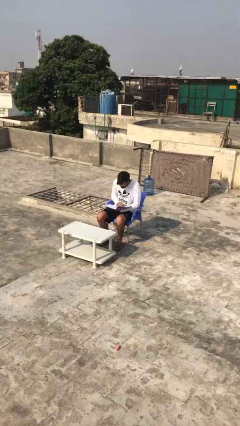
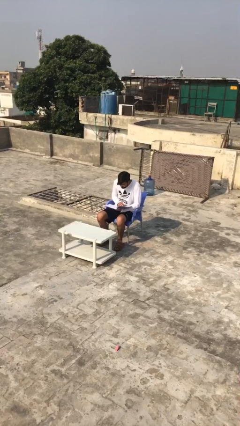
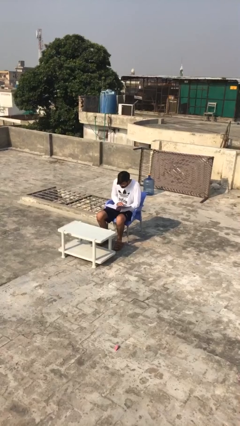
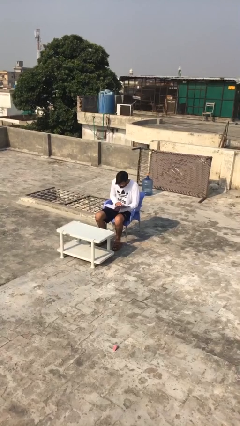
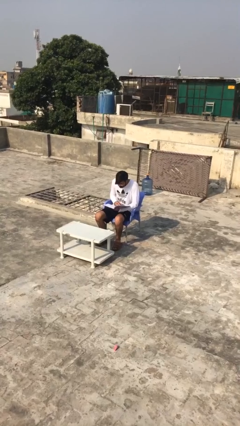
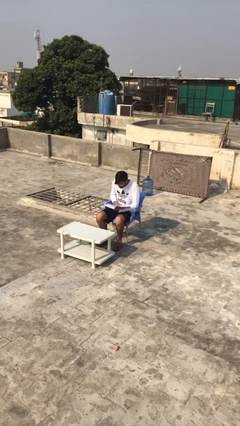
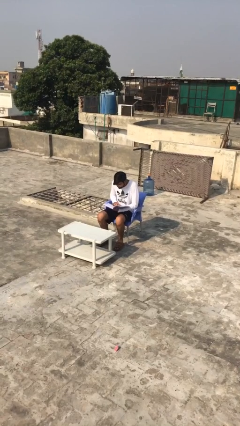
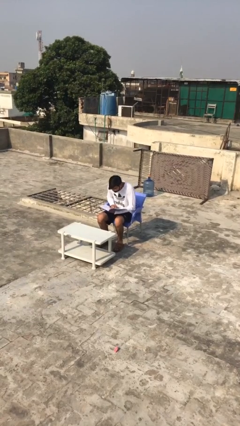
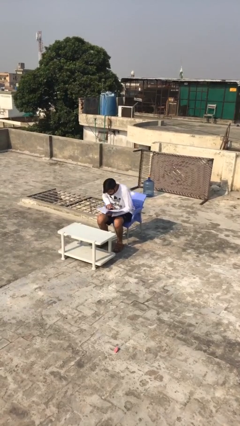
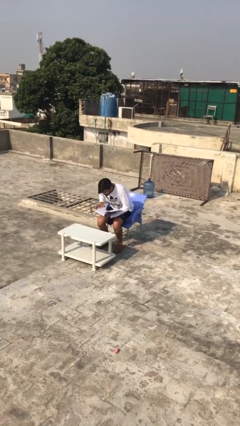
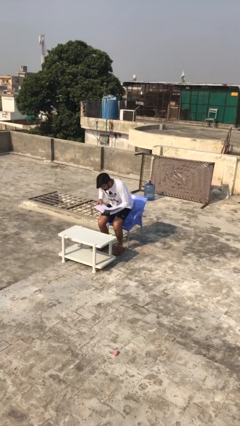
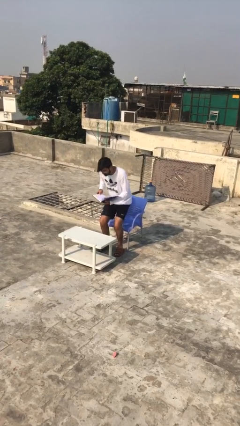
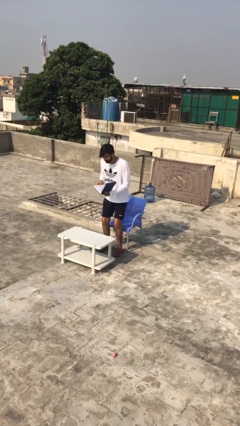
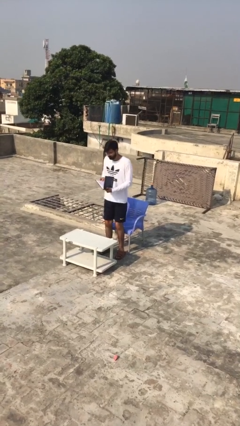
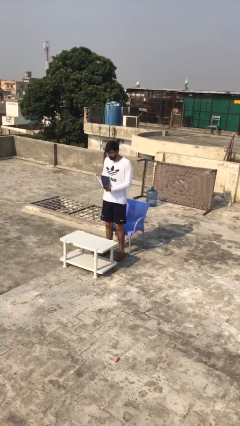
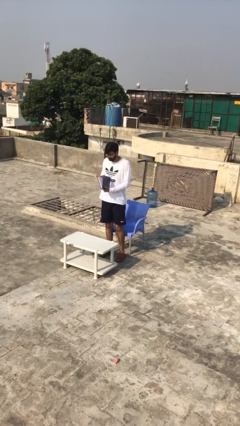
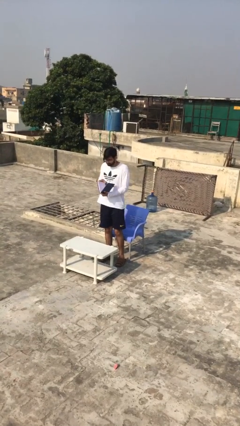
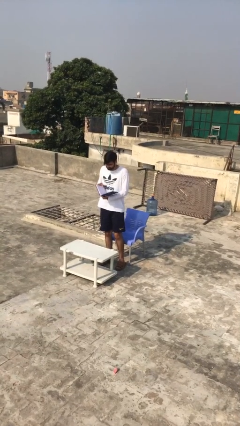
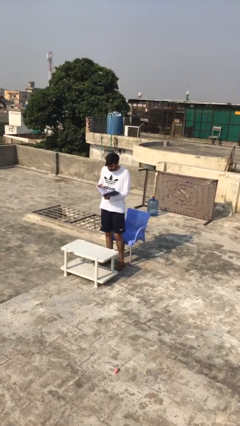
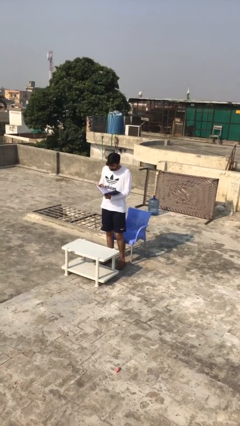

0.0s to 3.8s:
person stands up

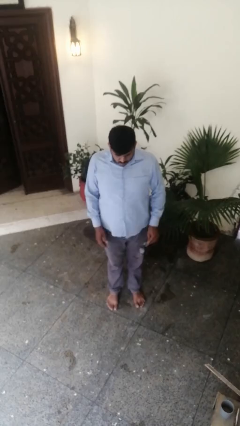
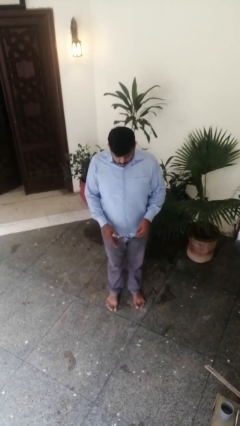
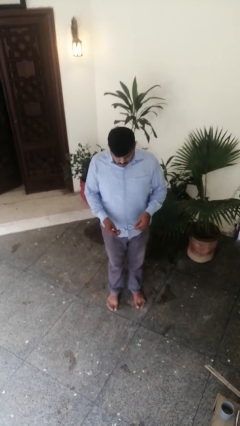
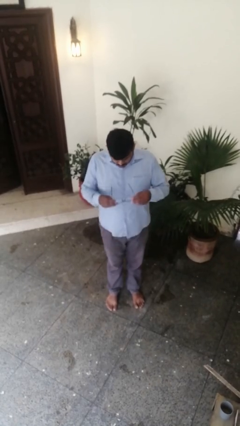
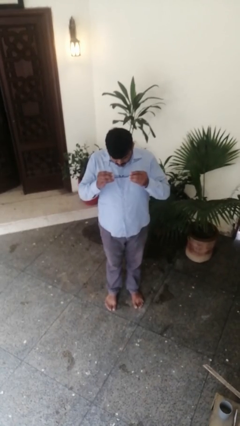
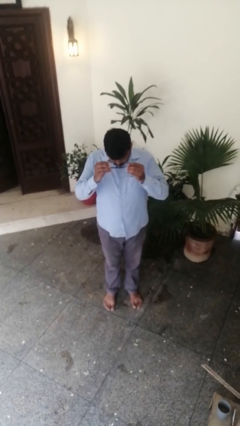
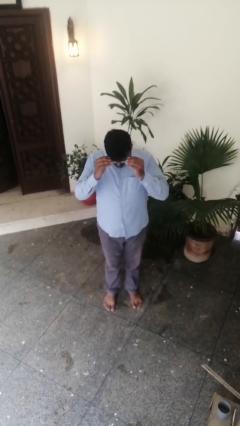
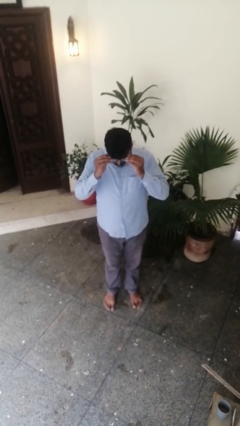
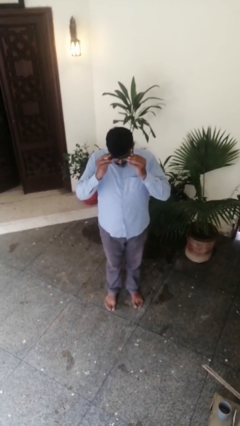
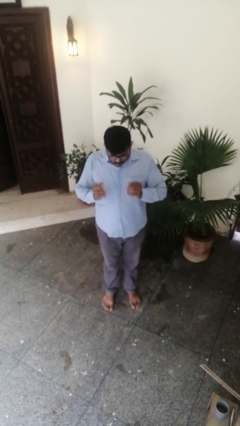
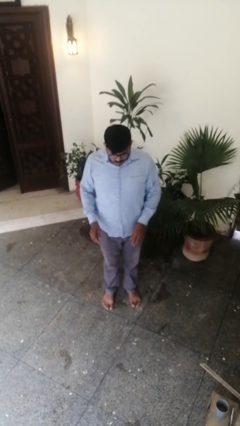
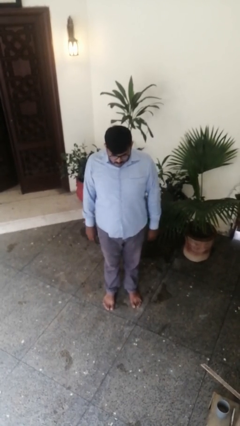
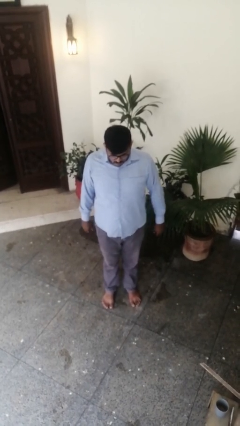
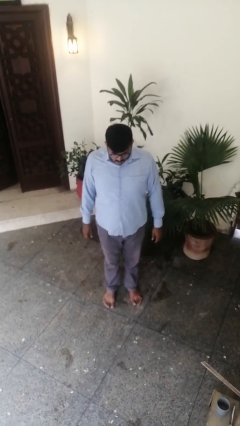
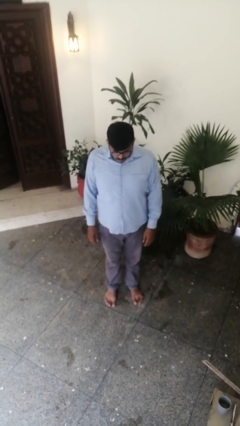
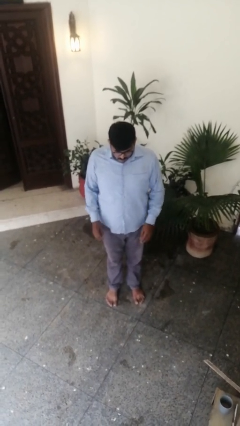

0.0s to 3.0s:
person puts on glasses

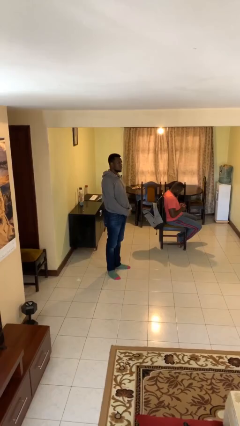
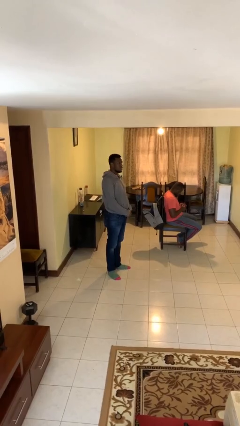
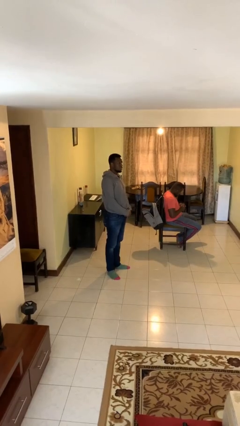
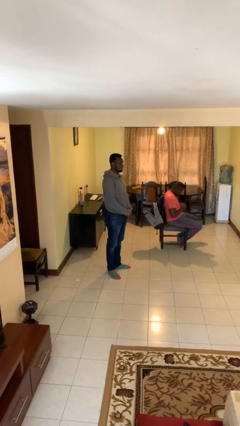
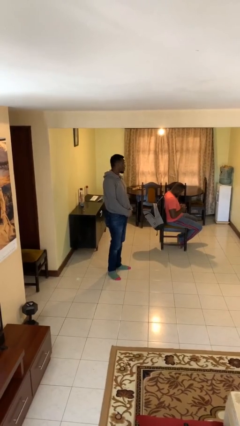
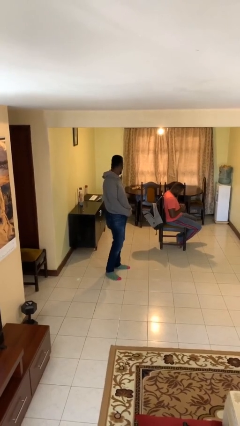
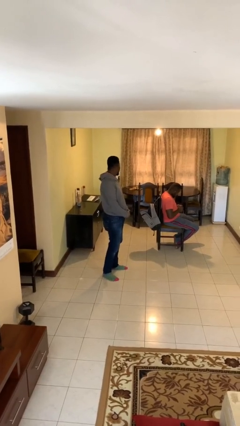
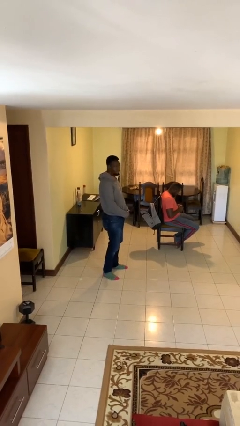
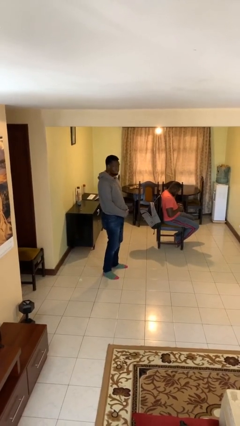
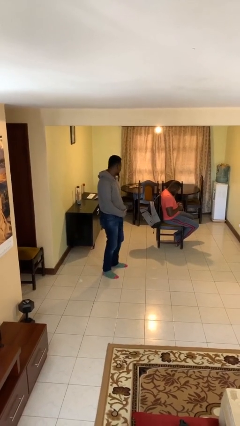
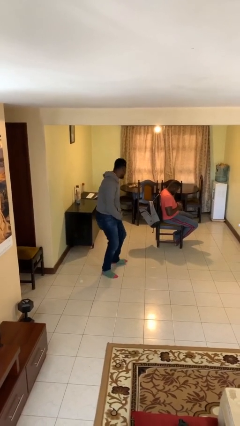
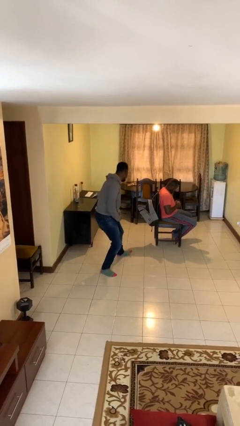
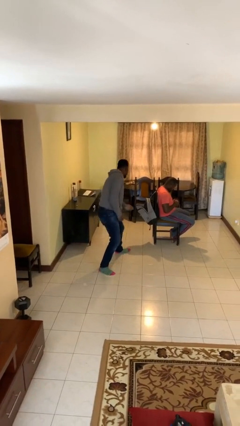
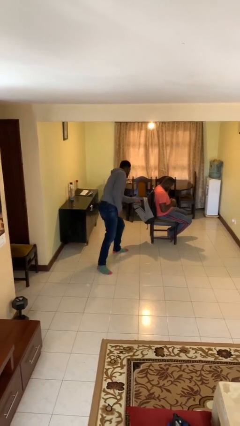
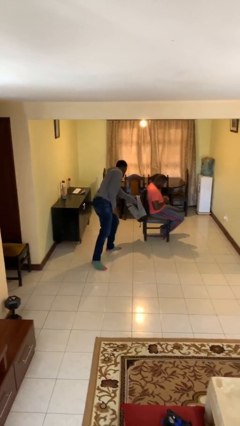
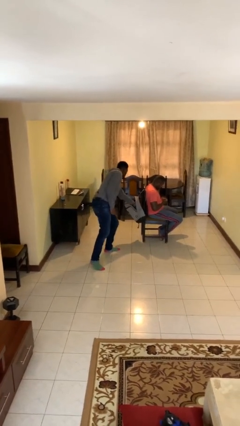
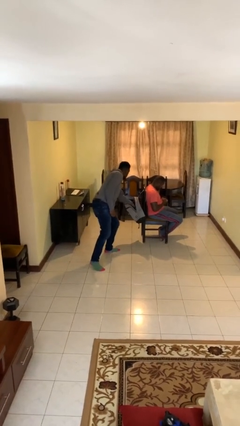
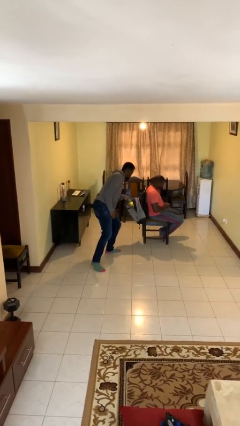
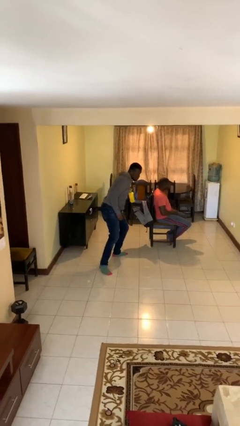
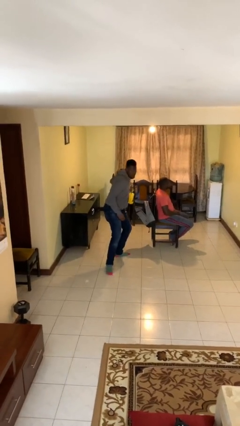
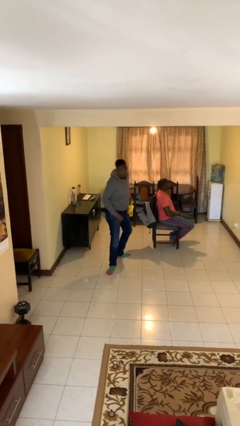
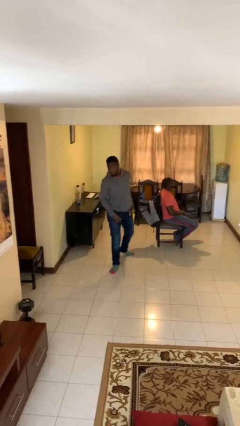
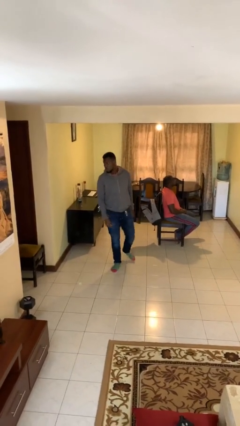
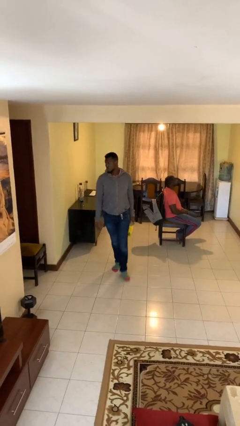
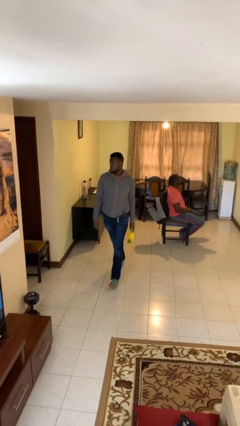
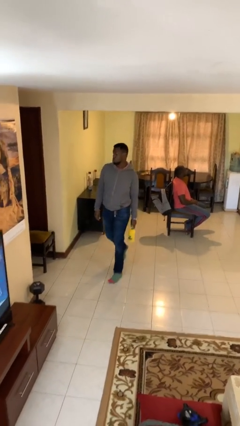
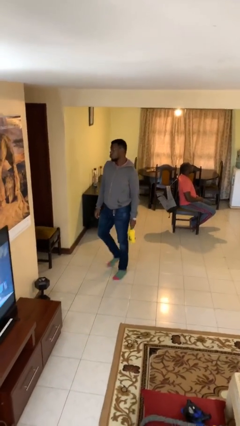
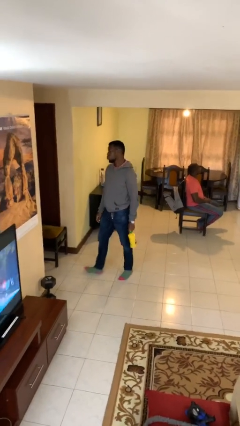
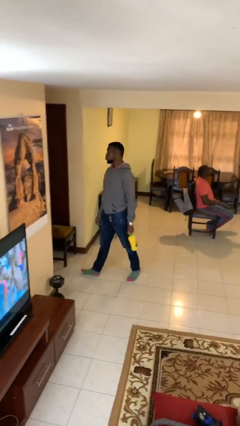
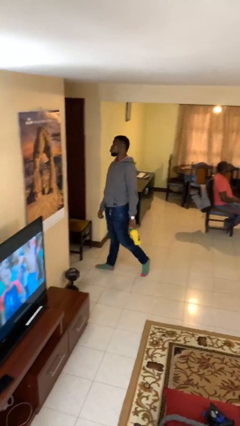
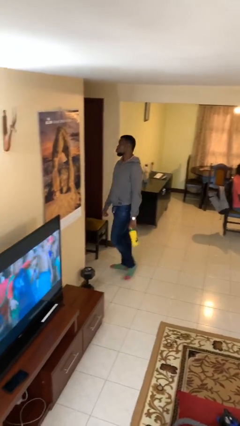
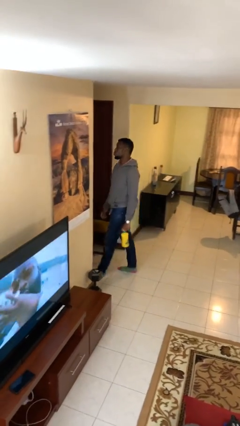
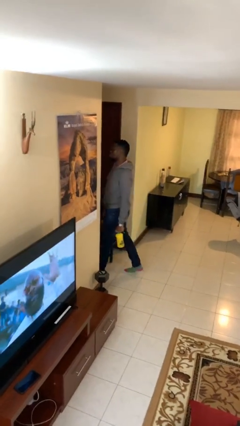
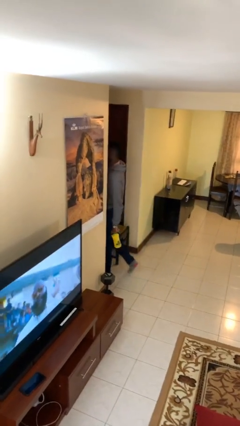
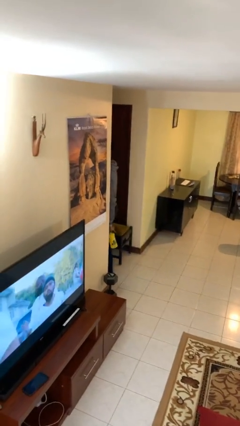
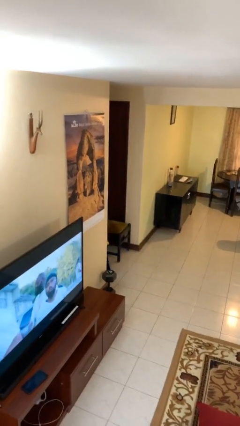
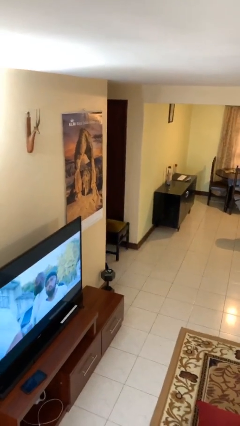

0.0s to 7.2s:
person steals object from person

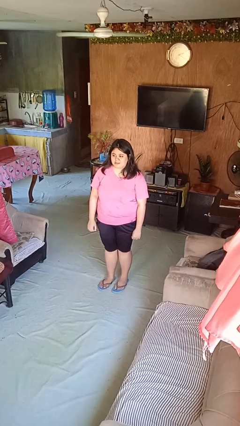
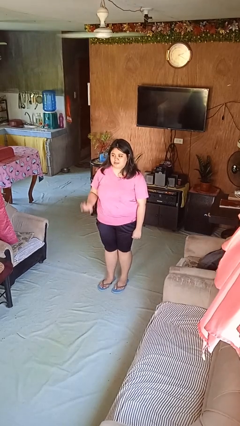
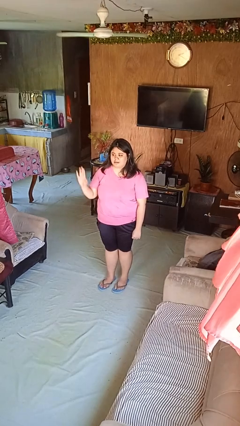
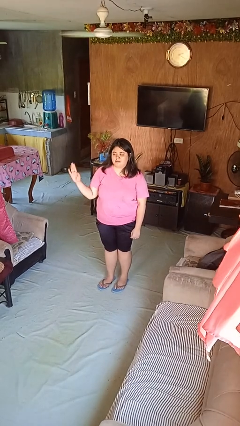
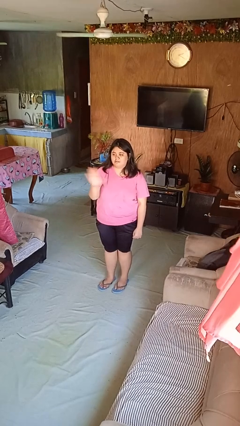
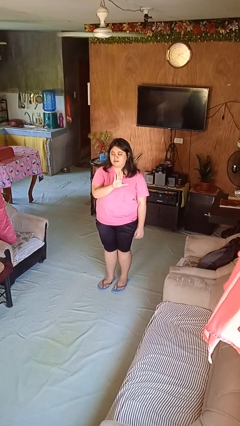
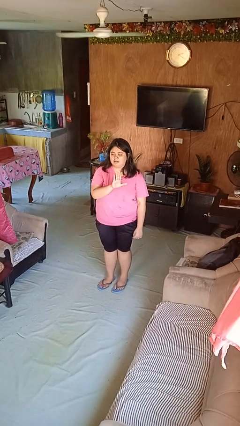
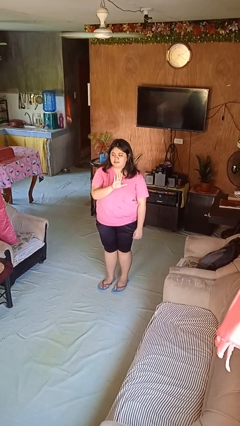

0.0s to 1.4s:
person gestures swipe left

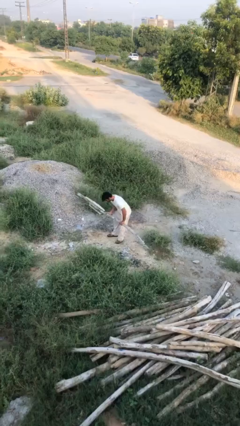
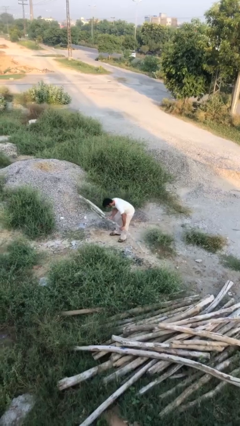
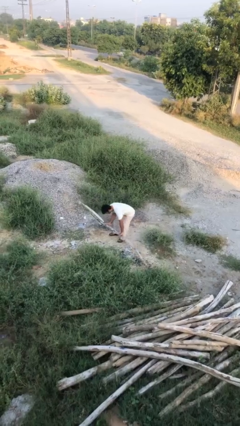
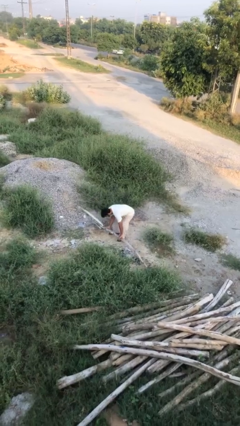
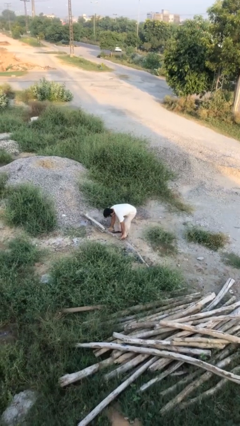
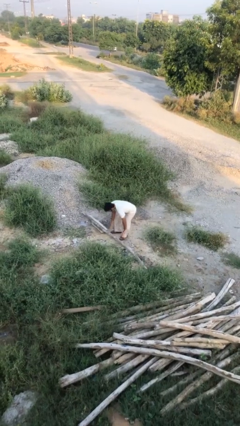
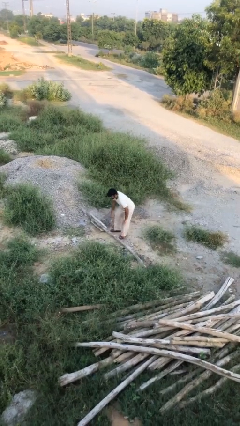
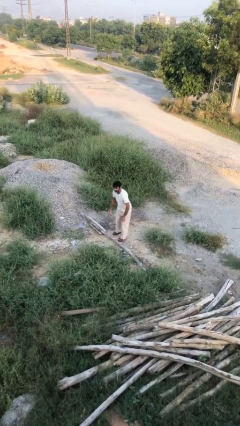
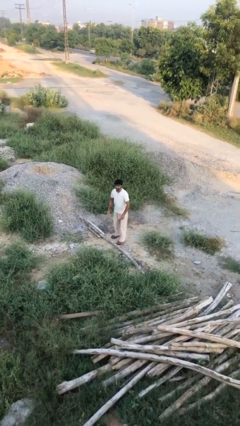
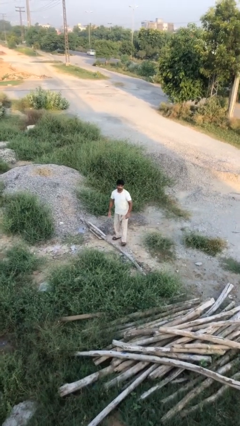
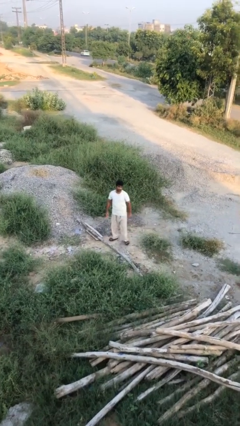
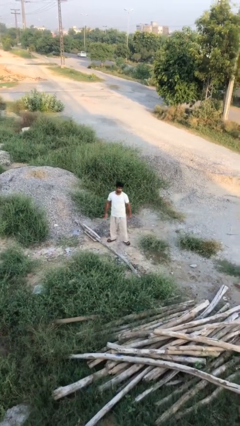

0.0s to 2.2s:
person puts down object on floor
